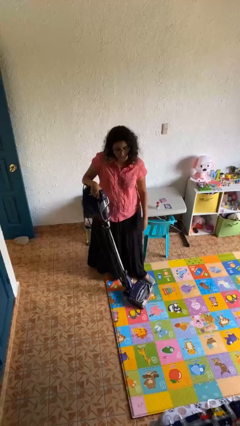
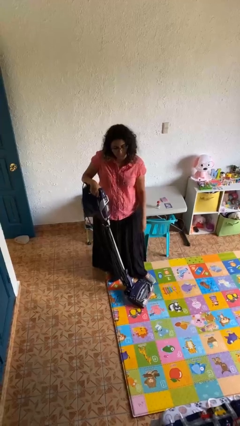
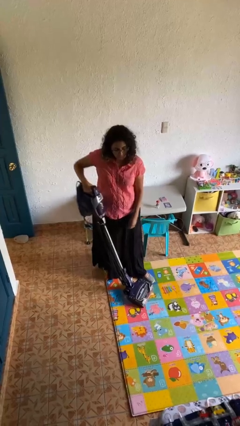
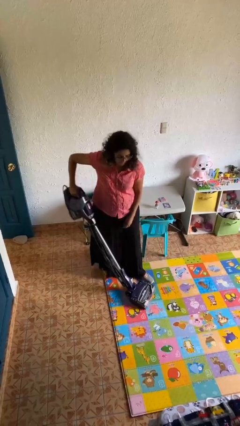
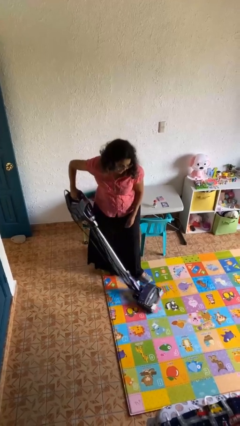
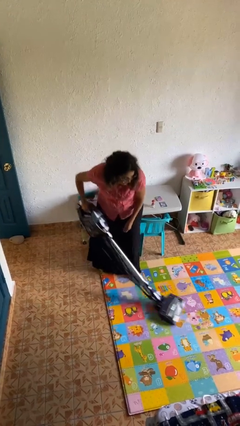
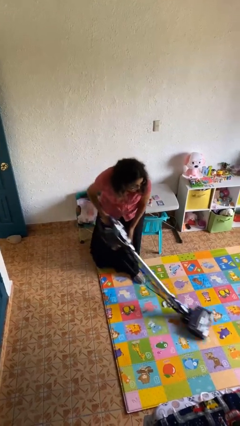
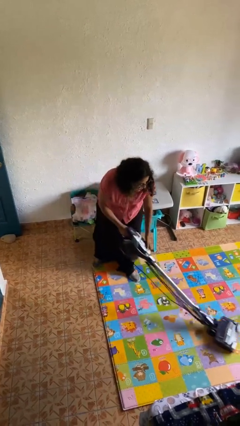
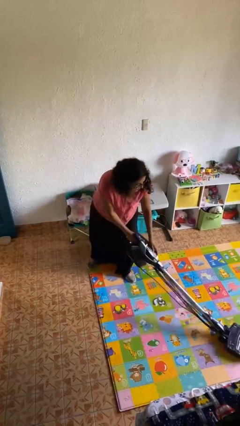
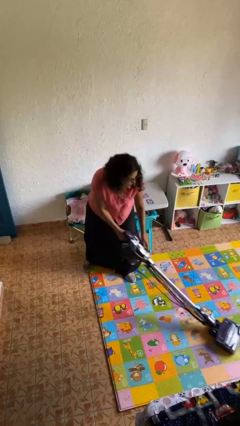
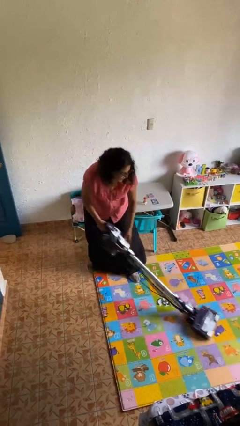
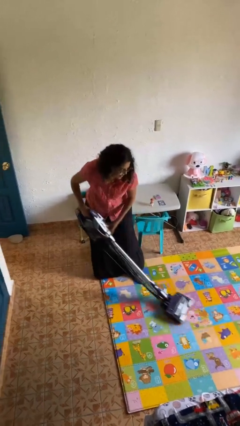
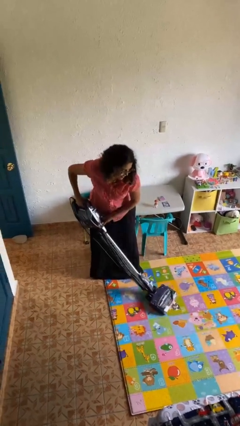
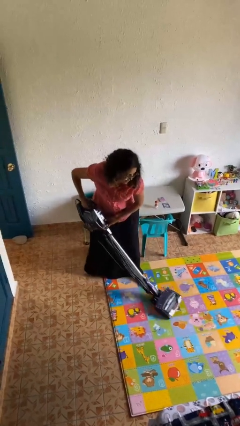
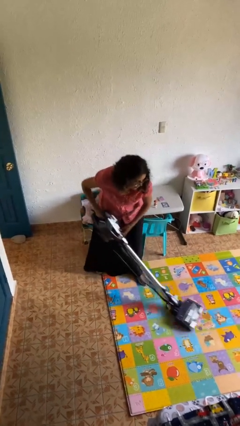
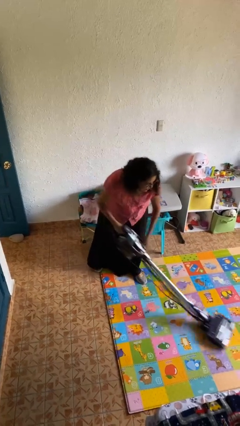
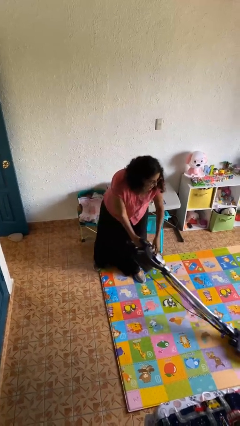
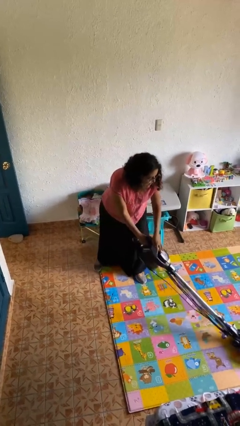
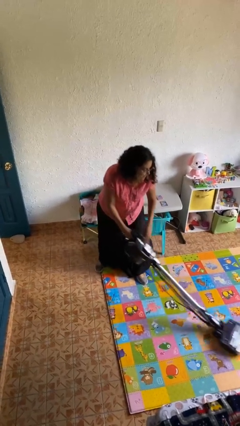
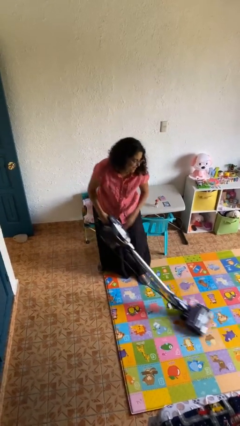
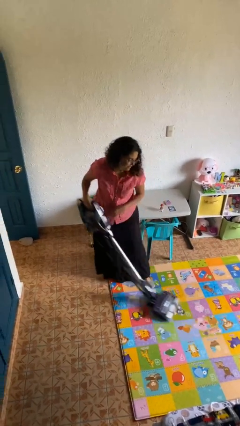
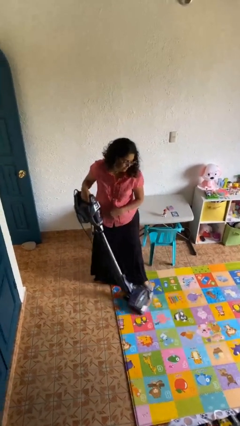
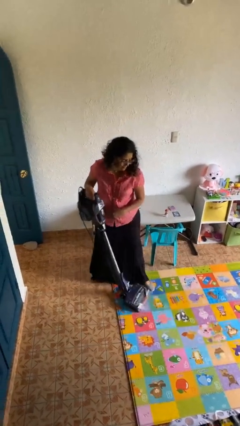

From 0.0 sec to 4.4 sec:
person vacuums carpet

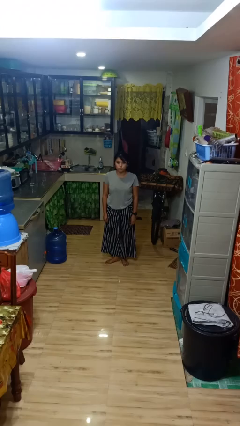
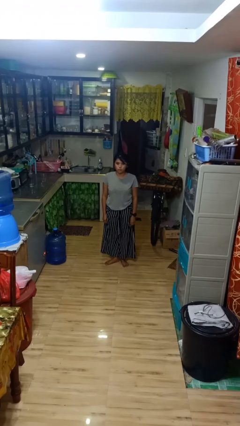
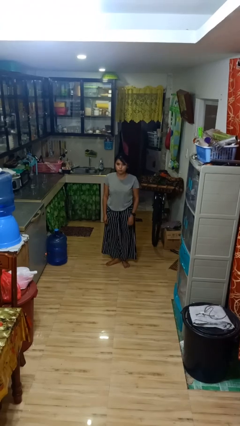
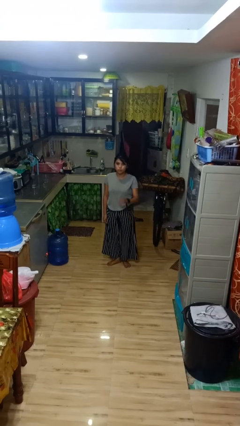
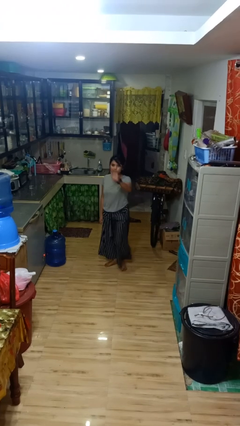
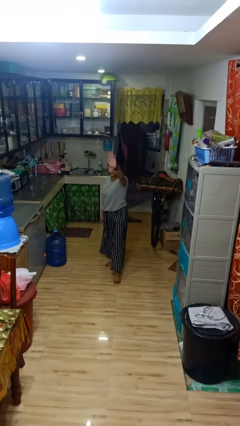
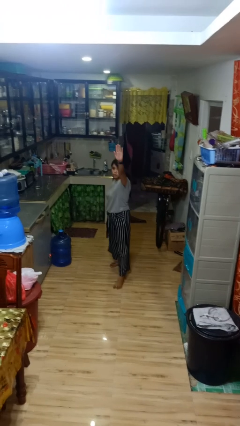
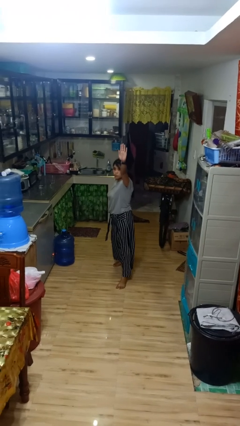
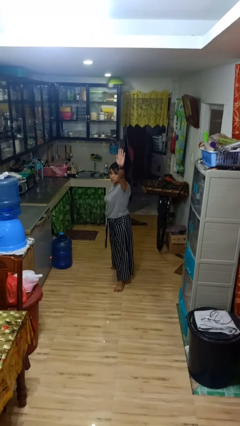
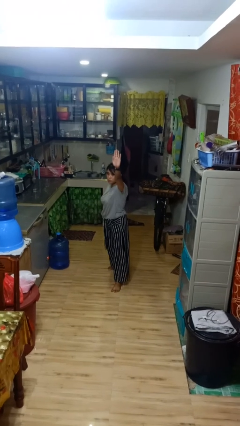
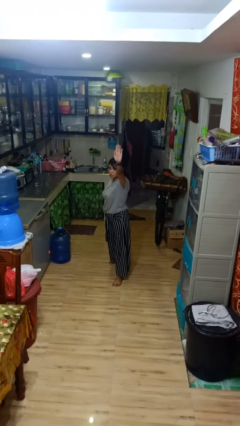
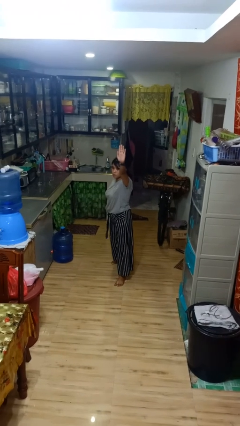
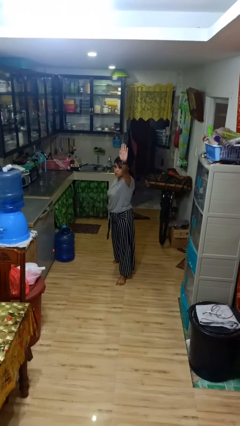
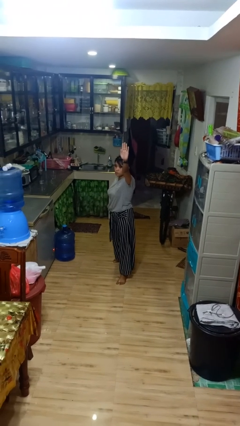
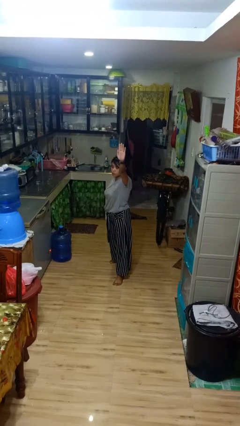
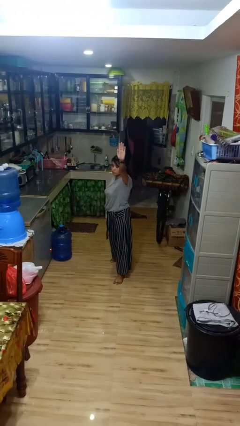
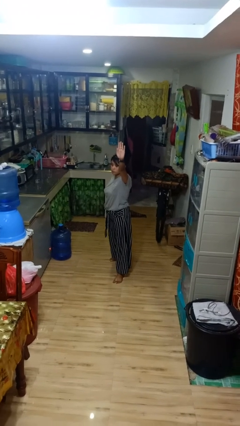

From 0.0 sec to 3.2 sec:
person gestures stop

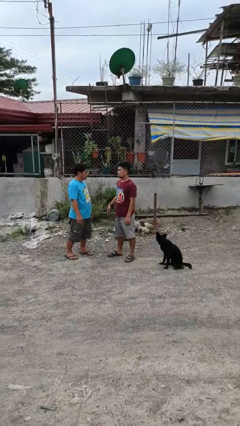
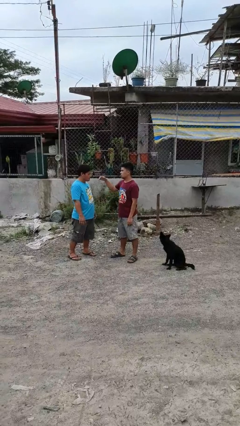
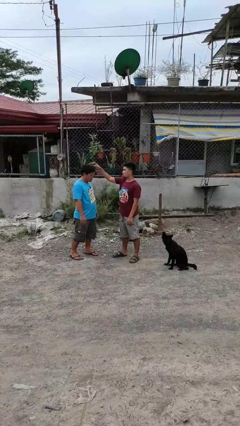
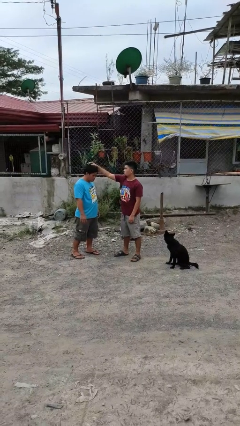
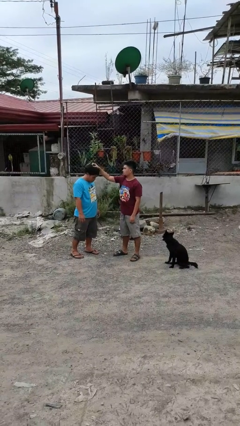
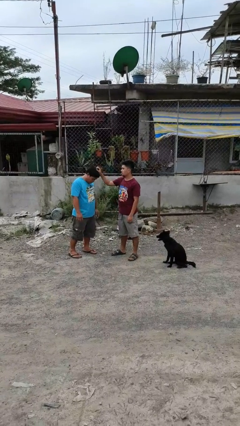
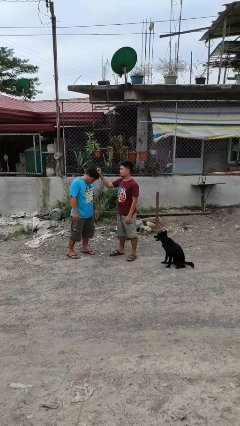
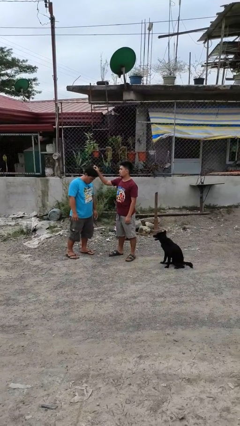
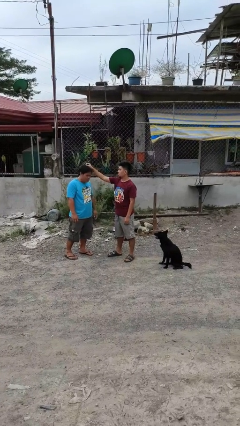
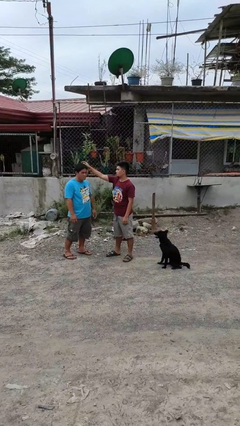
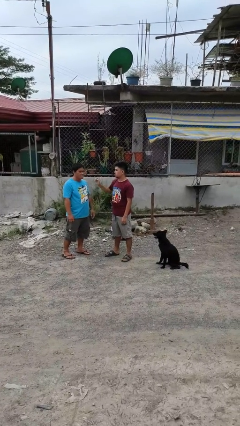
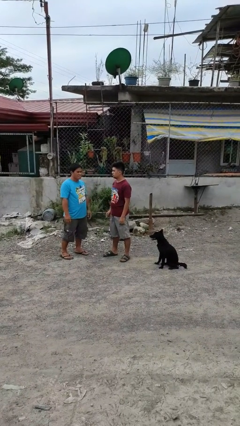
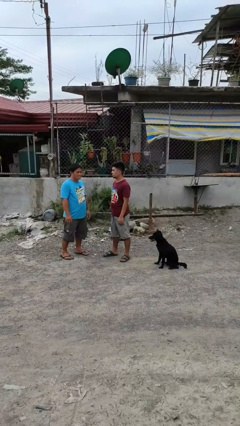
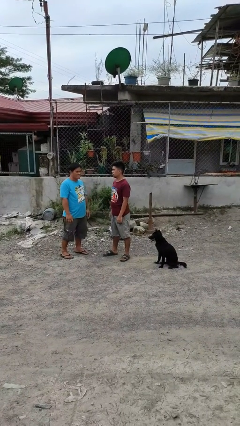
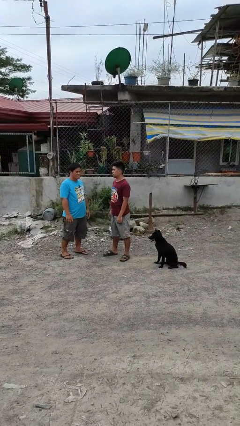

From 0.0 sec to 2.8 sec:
person grabs person by hair

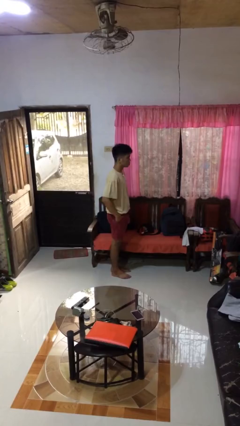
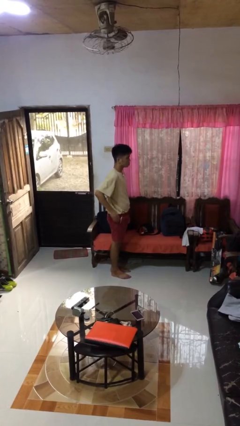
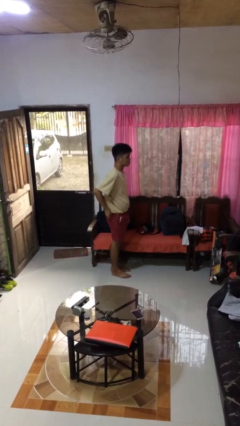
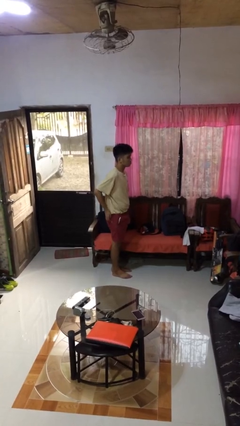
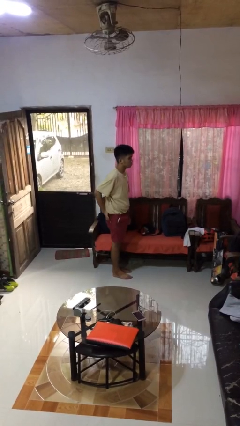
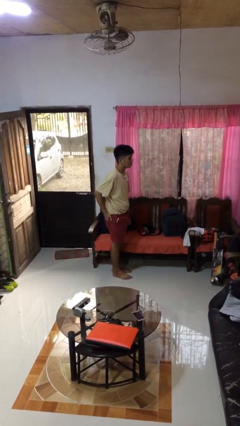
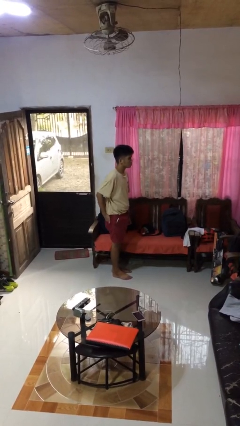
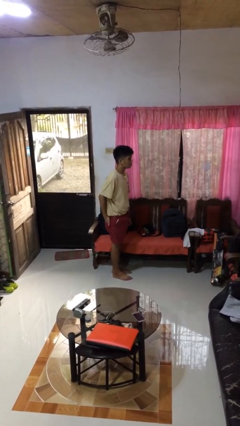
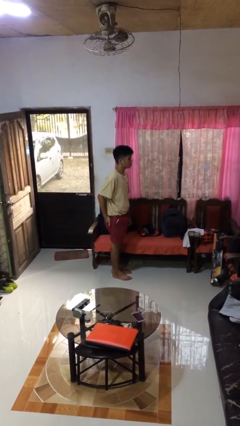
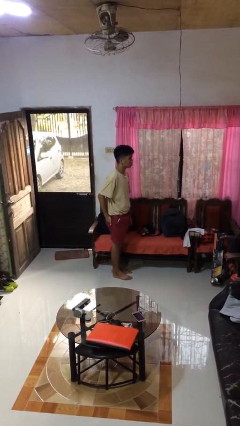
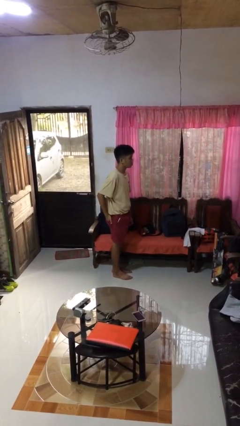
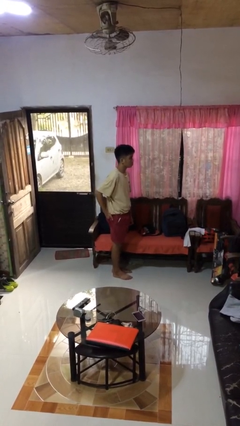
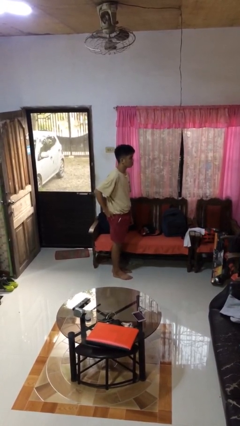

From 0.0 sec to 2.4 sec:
person puts hands in back pockets

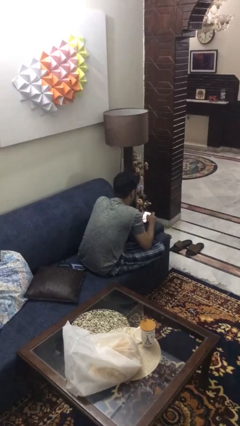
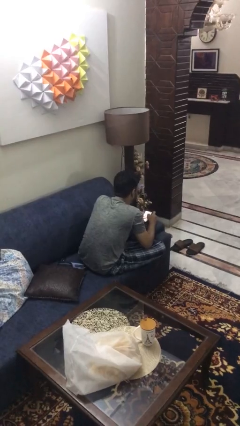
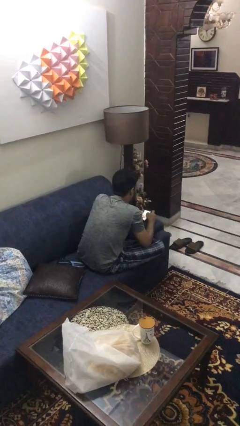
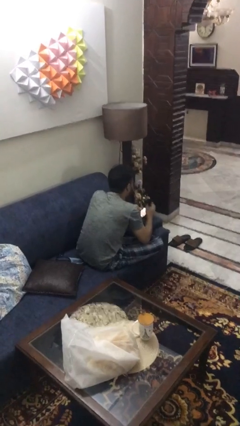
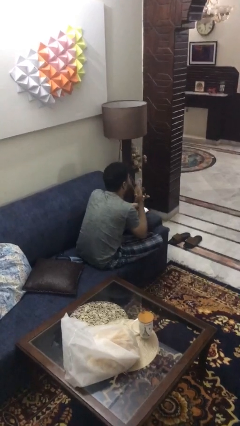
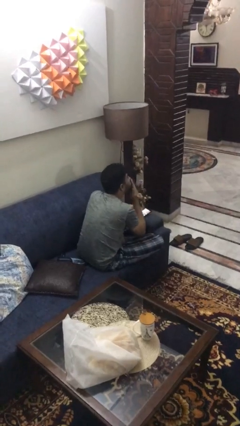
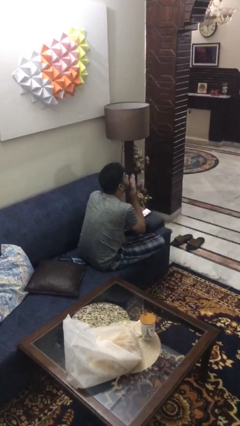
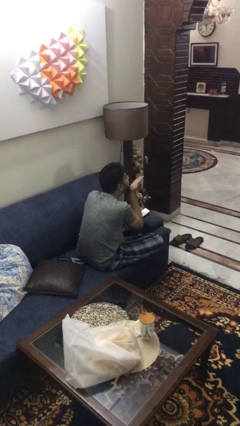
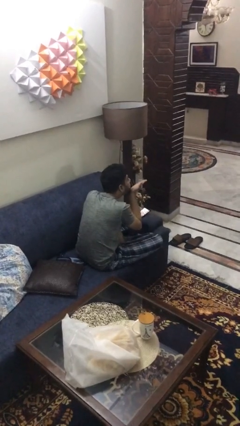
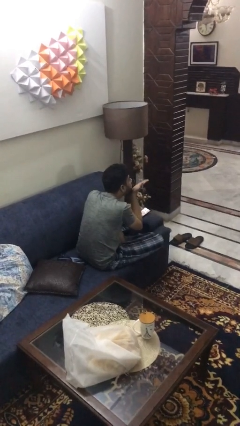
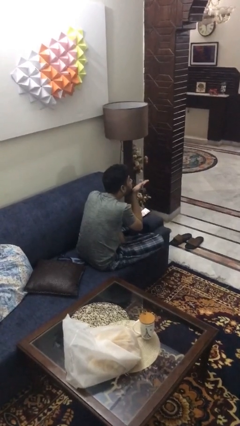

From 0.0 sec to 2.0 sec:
person gestures blow kiss

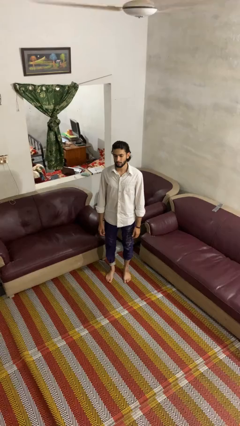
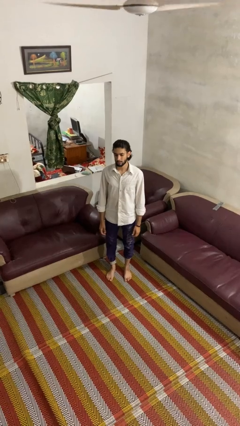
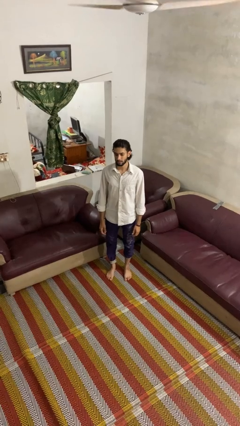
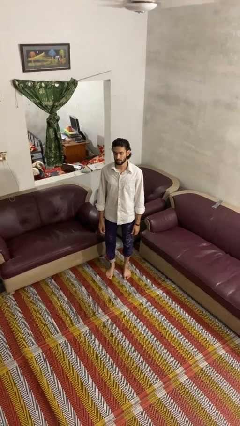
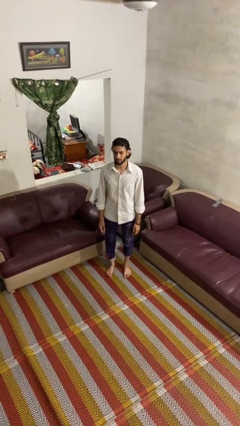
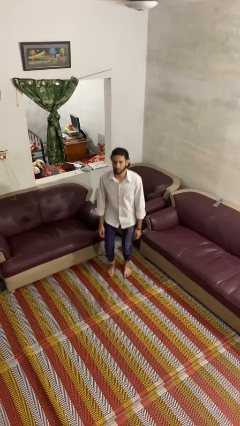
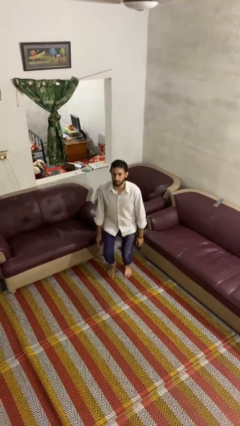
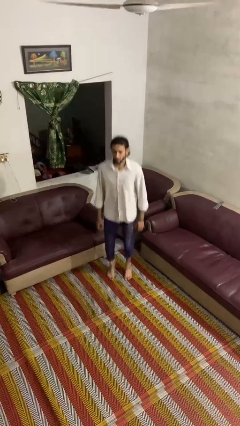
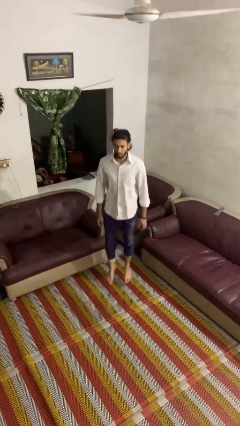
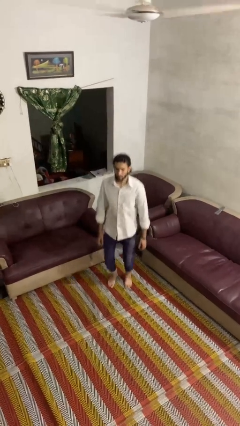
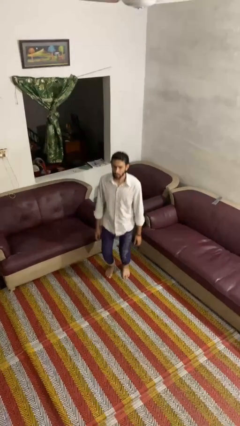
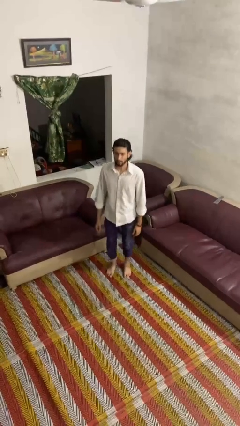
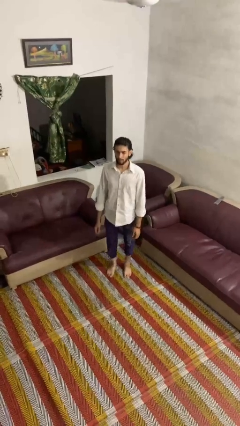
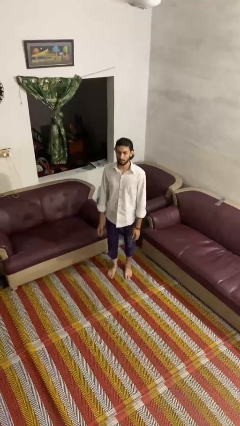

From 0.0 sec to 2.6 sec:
person jumps
